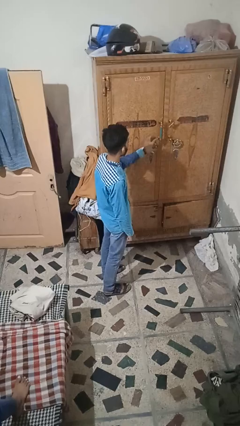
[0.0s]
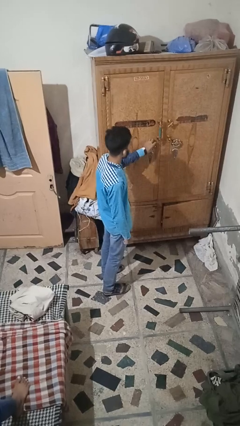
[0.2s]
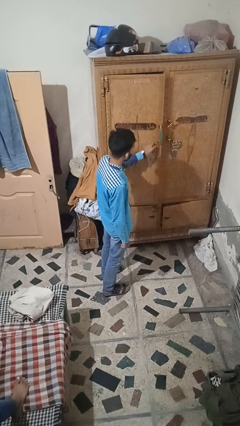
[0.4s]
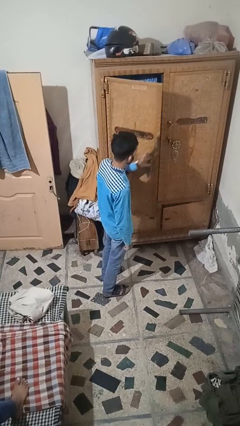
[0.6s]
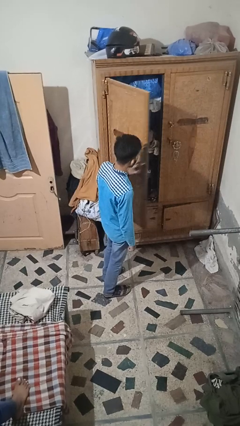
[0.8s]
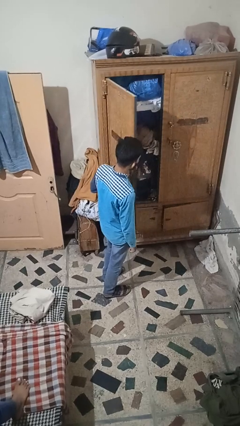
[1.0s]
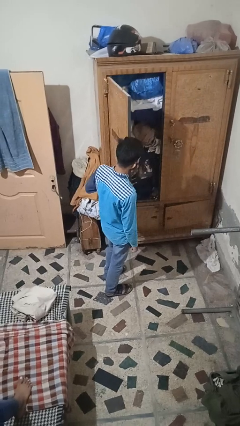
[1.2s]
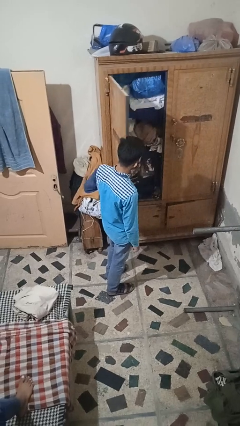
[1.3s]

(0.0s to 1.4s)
person opens closet door

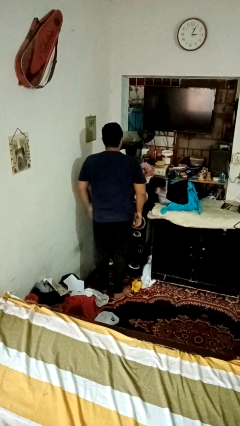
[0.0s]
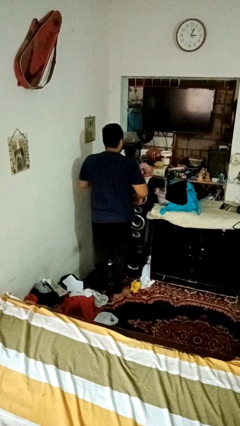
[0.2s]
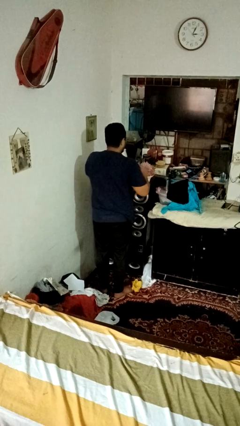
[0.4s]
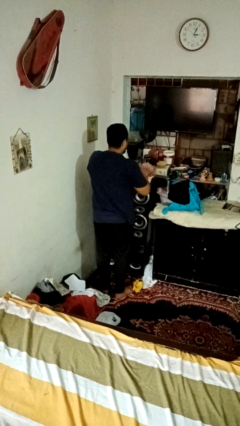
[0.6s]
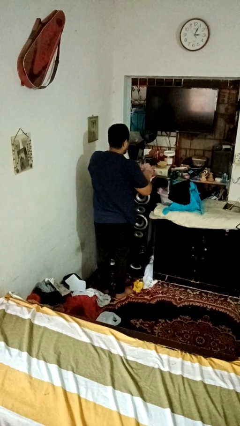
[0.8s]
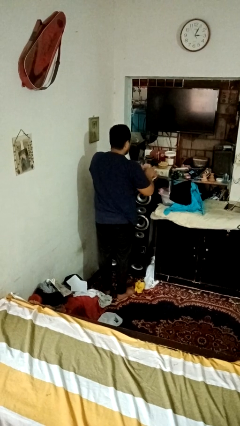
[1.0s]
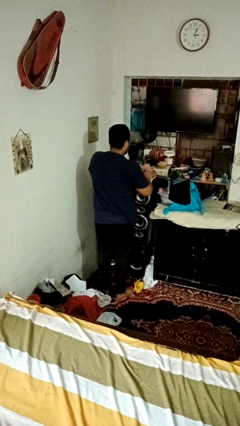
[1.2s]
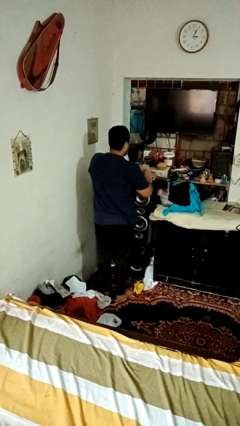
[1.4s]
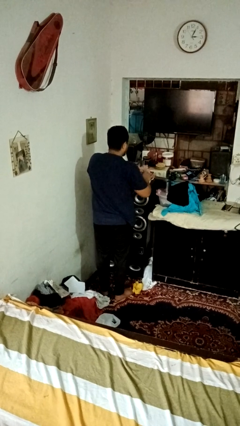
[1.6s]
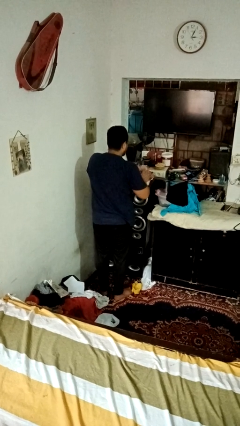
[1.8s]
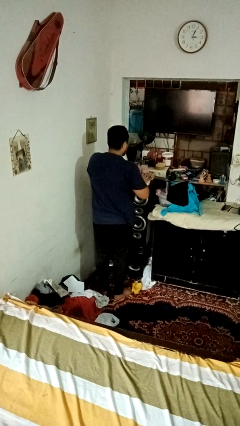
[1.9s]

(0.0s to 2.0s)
person arranges flowers in vase

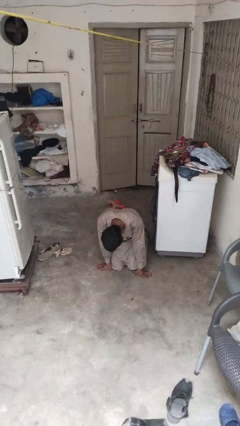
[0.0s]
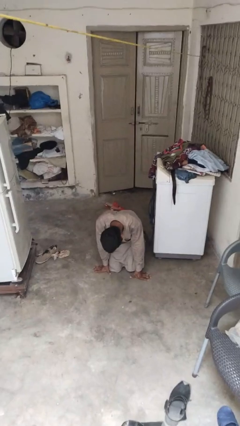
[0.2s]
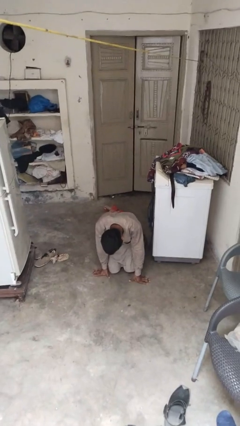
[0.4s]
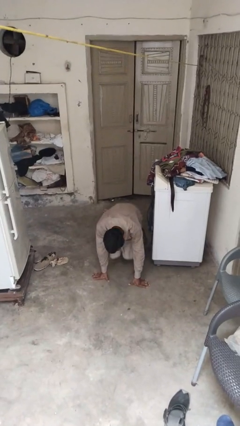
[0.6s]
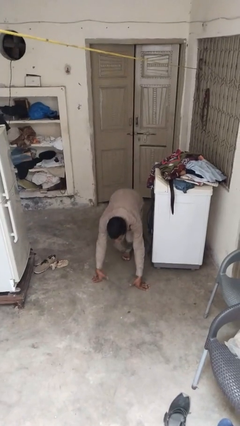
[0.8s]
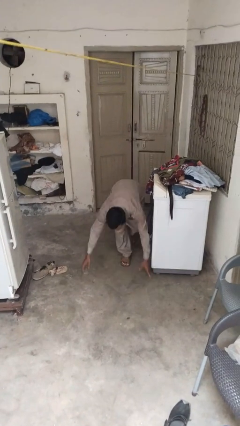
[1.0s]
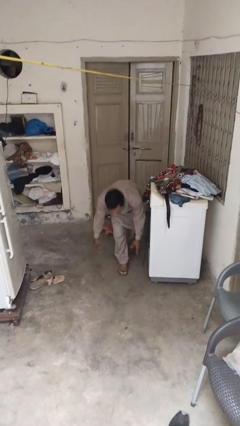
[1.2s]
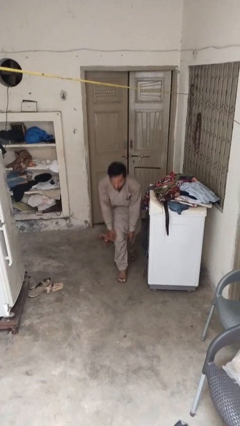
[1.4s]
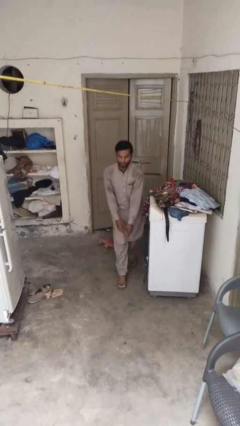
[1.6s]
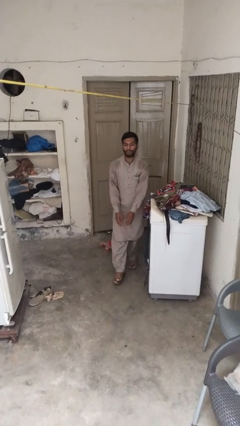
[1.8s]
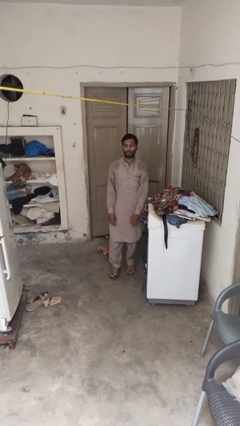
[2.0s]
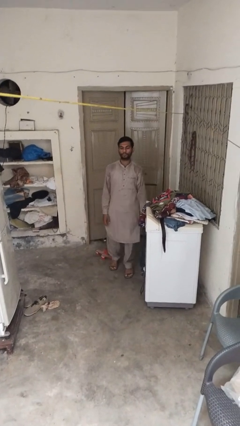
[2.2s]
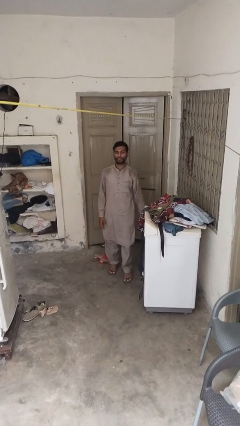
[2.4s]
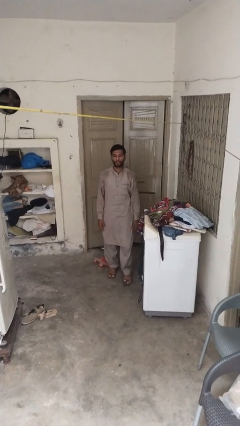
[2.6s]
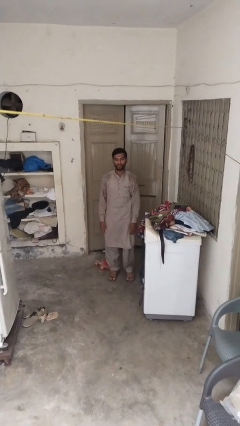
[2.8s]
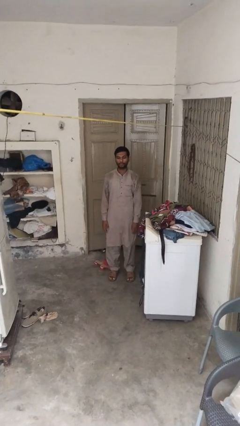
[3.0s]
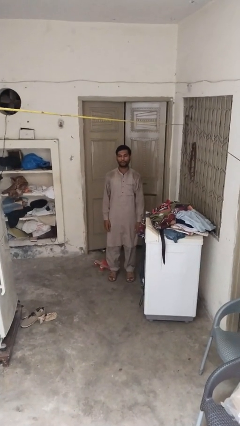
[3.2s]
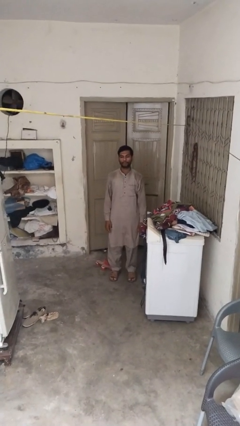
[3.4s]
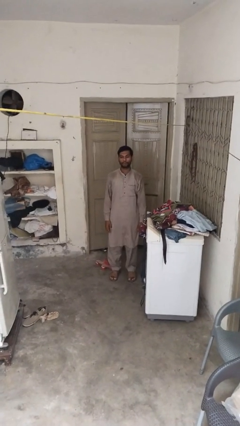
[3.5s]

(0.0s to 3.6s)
person stands up from floor

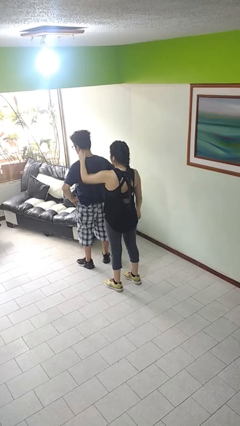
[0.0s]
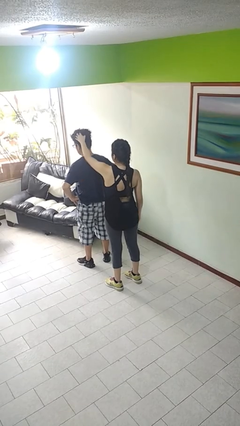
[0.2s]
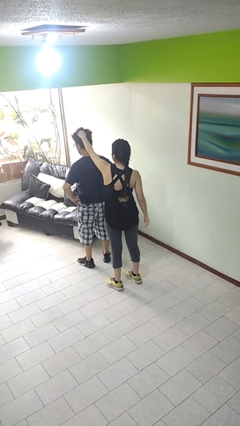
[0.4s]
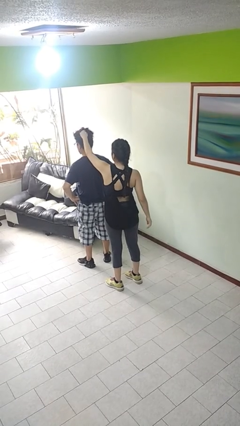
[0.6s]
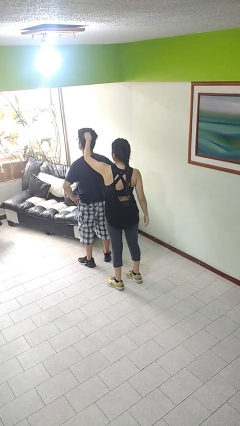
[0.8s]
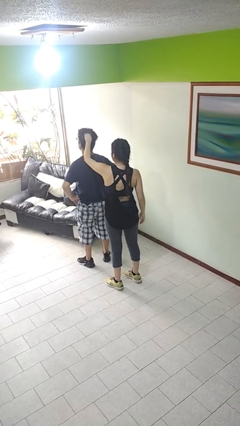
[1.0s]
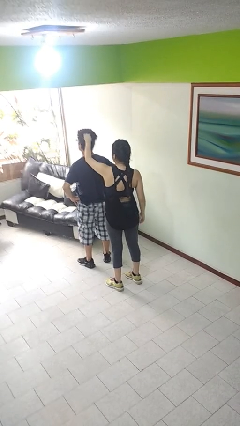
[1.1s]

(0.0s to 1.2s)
person grabs person by hair

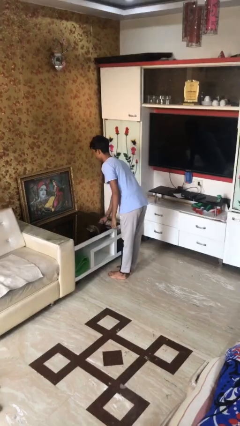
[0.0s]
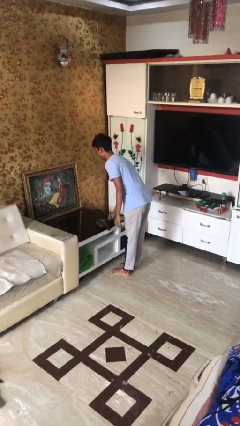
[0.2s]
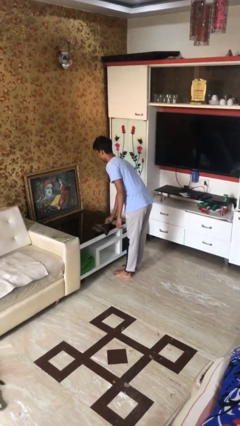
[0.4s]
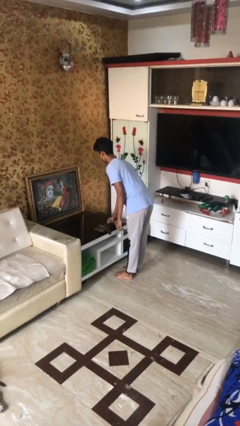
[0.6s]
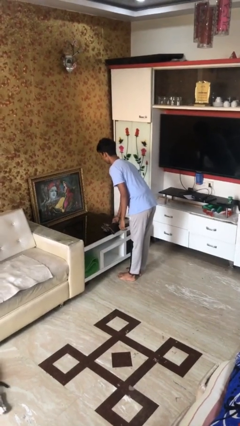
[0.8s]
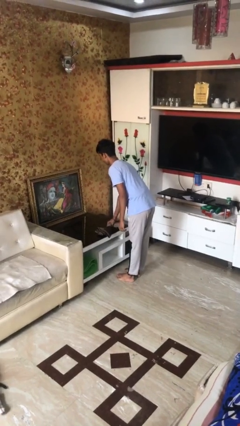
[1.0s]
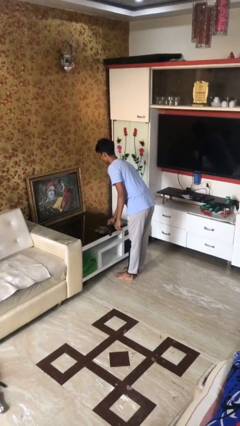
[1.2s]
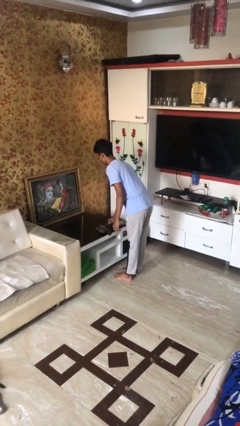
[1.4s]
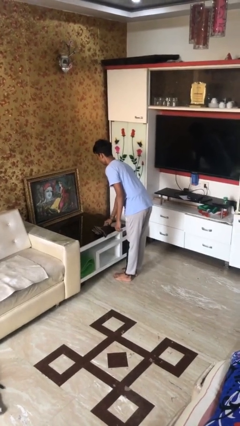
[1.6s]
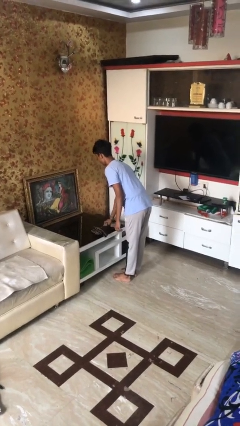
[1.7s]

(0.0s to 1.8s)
person cleans table with rag

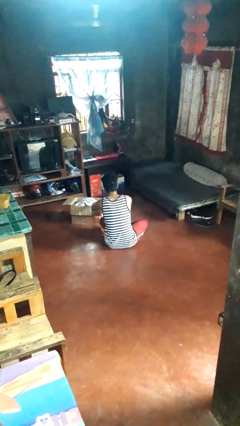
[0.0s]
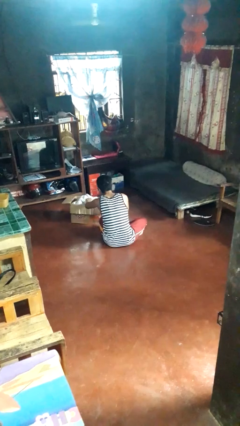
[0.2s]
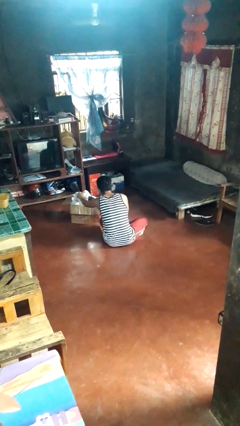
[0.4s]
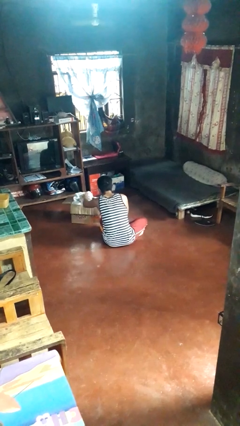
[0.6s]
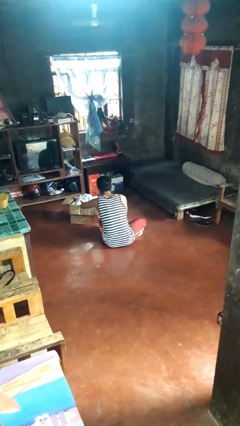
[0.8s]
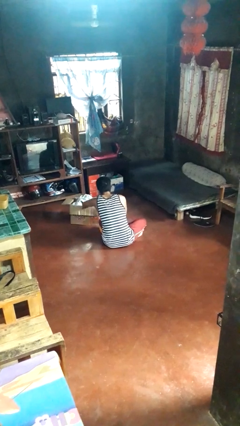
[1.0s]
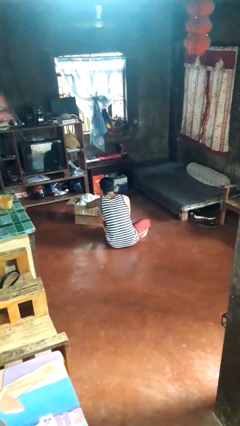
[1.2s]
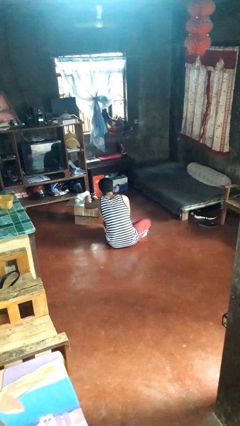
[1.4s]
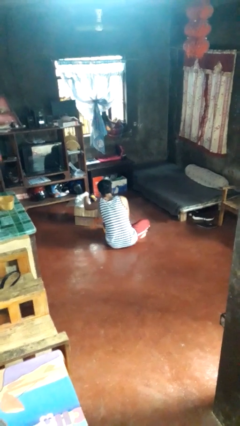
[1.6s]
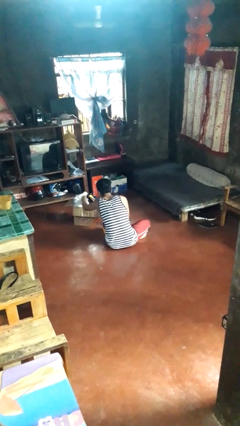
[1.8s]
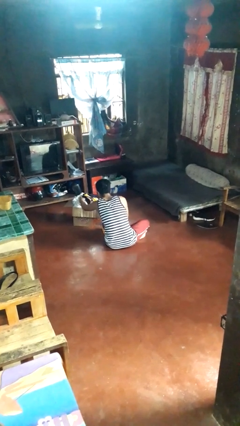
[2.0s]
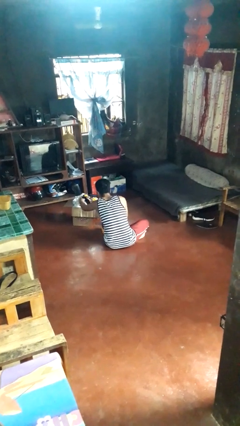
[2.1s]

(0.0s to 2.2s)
person searches in box

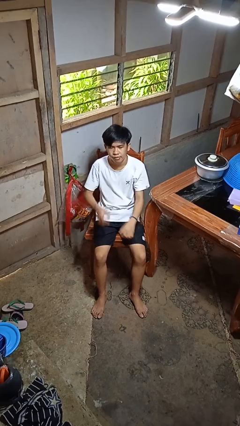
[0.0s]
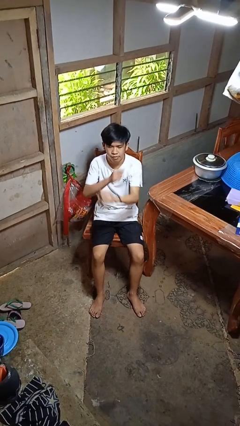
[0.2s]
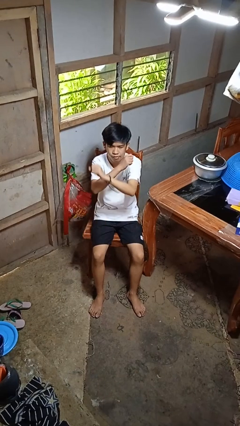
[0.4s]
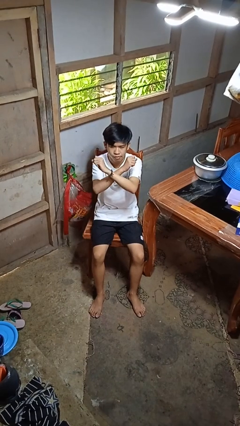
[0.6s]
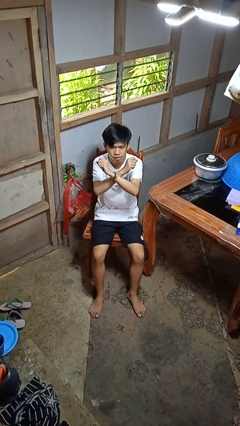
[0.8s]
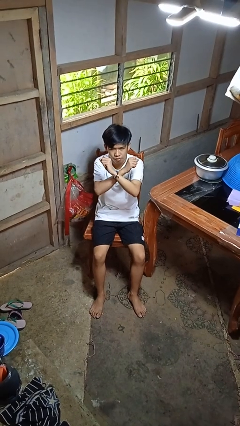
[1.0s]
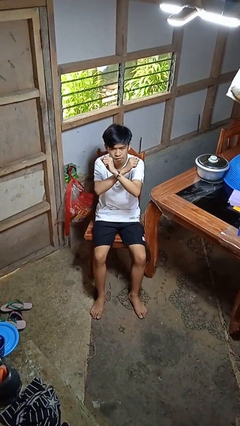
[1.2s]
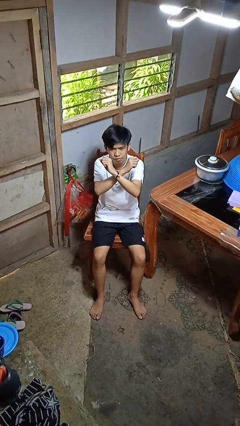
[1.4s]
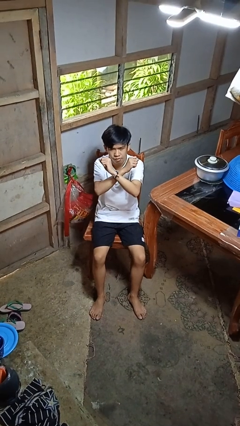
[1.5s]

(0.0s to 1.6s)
person gestures arms x

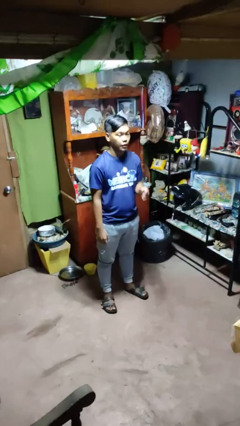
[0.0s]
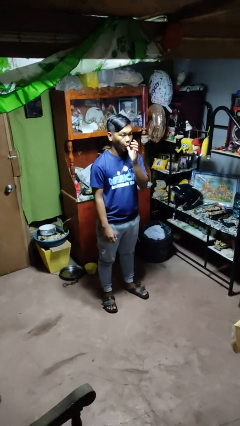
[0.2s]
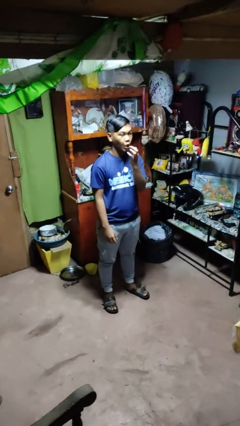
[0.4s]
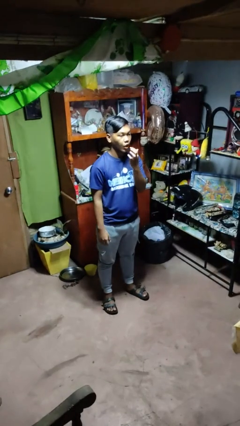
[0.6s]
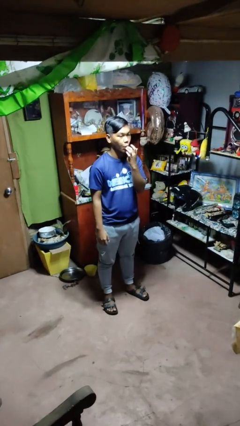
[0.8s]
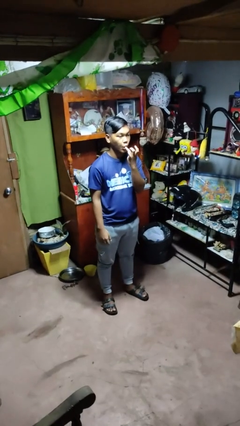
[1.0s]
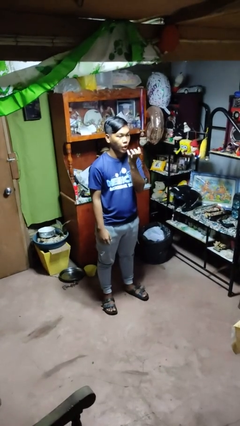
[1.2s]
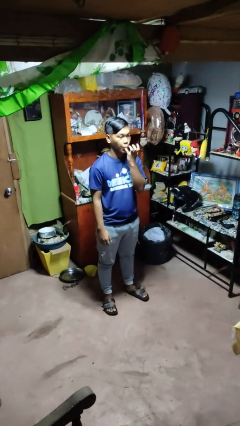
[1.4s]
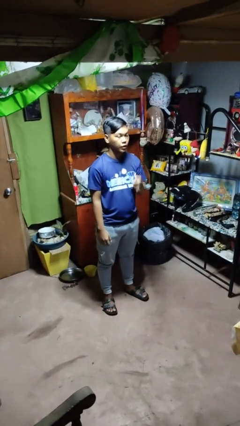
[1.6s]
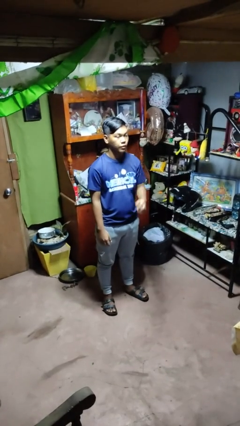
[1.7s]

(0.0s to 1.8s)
person licks fingers

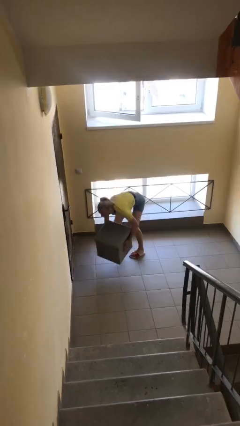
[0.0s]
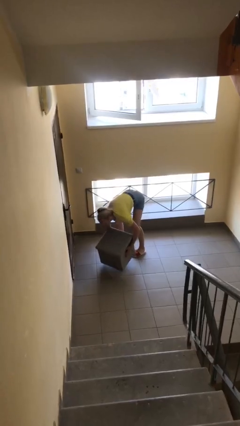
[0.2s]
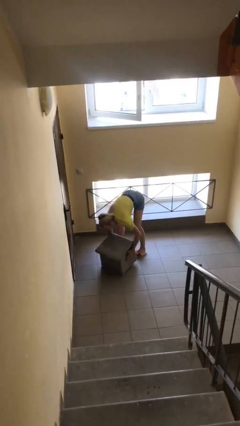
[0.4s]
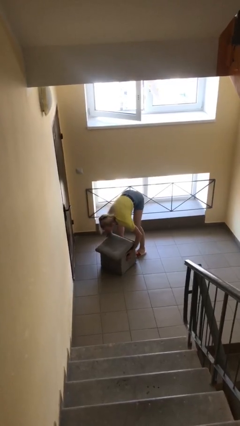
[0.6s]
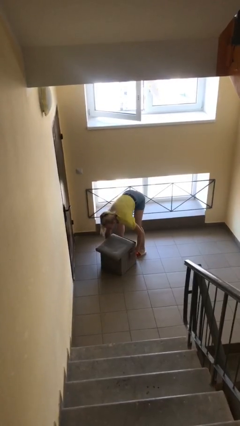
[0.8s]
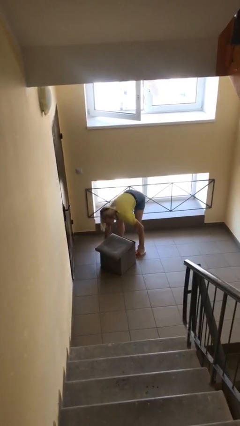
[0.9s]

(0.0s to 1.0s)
person puts down object on floor
